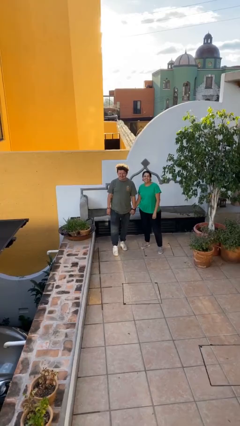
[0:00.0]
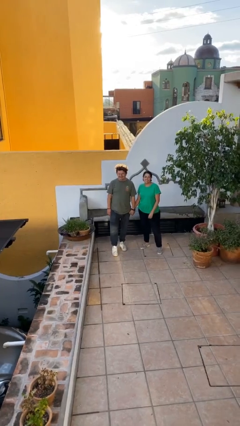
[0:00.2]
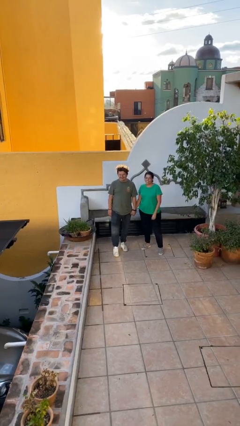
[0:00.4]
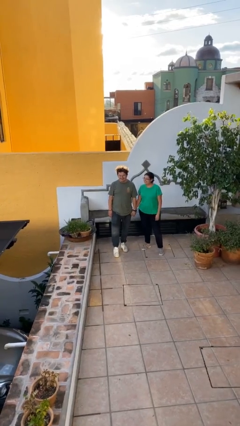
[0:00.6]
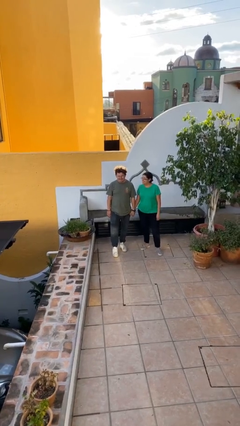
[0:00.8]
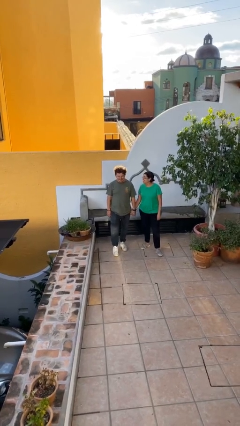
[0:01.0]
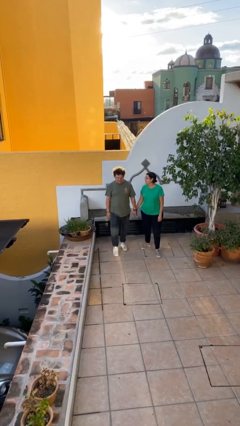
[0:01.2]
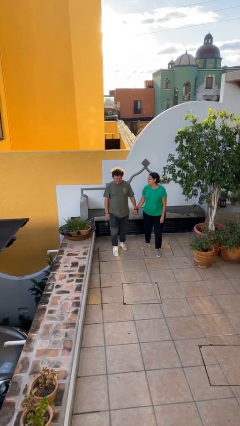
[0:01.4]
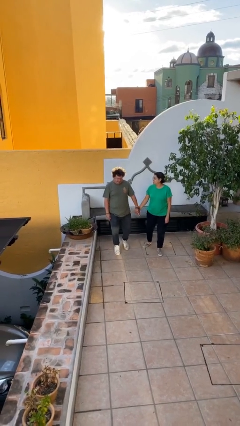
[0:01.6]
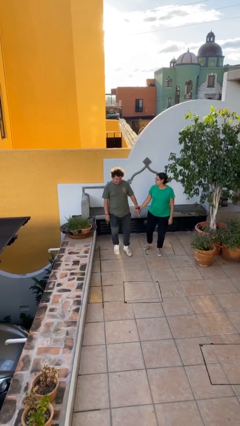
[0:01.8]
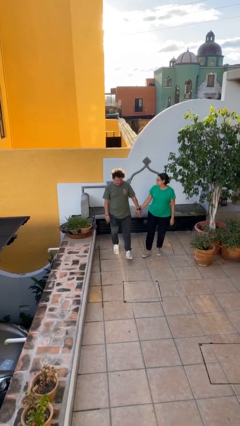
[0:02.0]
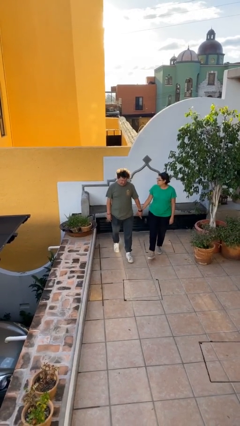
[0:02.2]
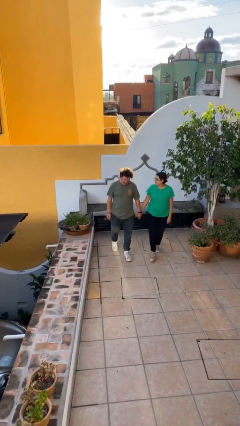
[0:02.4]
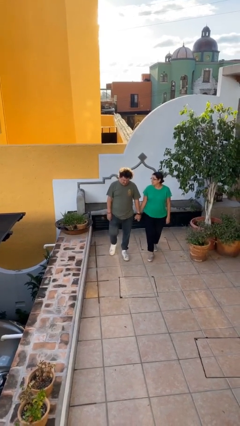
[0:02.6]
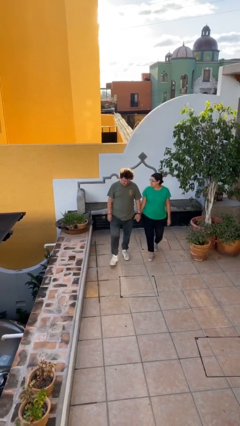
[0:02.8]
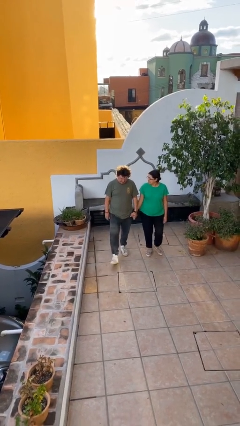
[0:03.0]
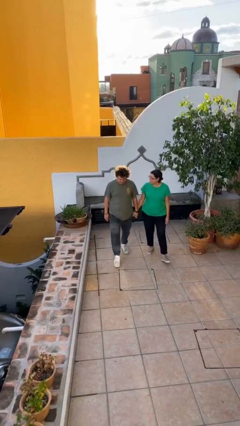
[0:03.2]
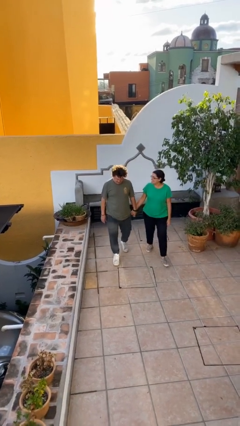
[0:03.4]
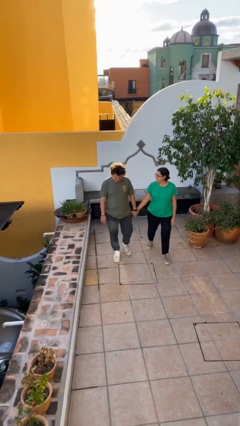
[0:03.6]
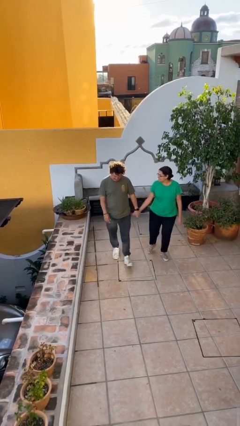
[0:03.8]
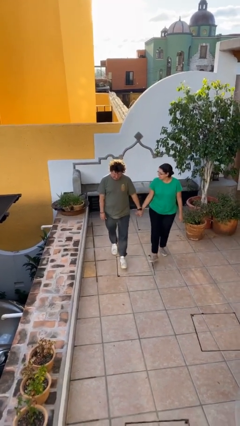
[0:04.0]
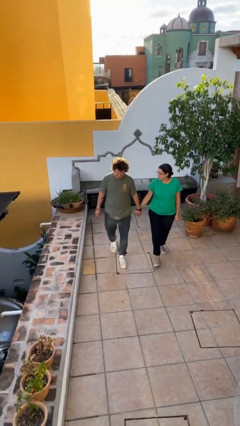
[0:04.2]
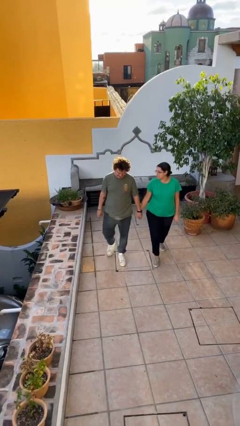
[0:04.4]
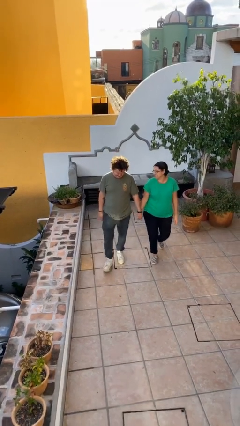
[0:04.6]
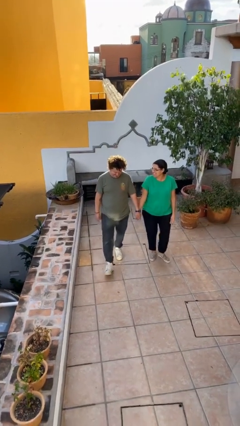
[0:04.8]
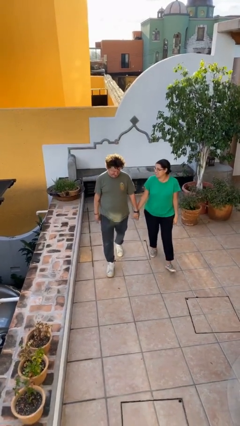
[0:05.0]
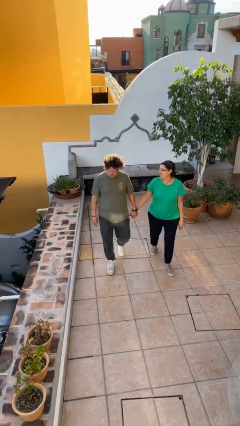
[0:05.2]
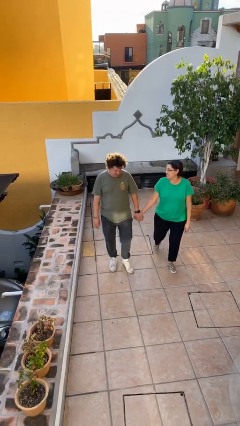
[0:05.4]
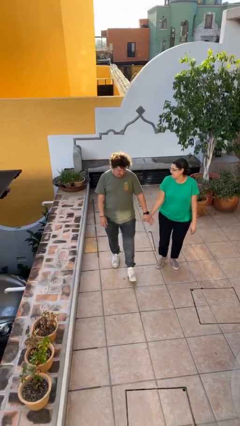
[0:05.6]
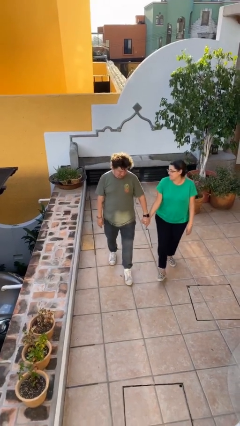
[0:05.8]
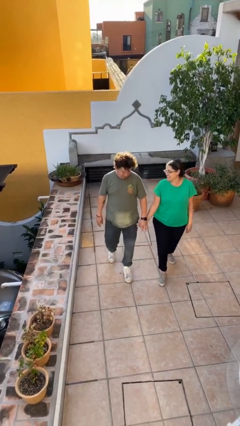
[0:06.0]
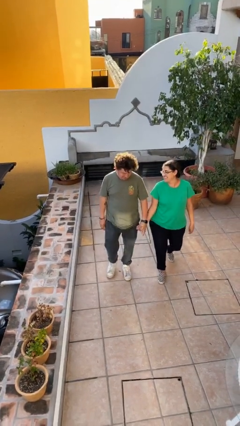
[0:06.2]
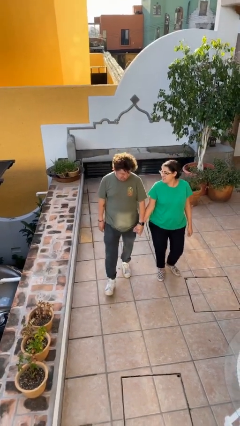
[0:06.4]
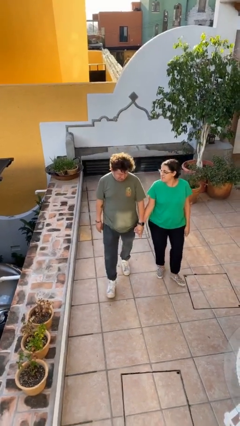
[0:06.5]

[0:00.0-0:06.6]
person holds hand

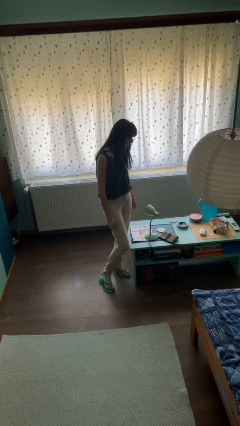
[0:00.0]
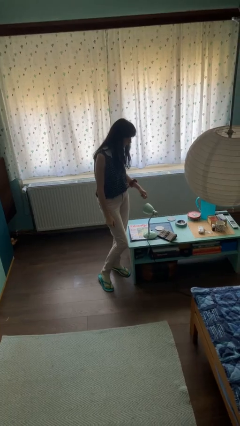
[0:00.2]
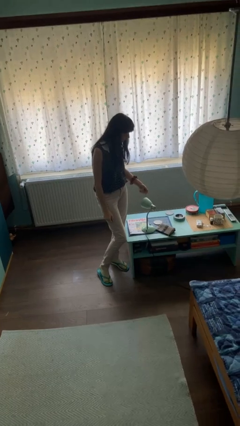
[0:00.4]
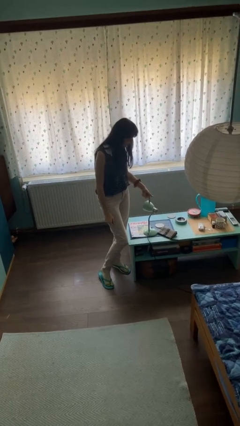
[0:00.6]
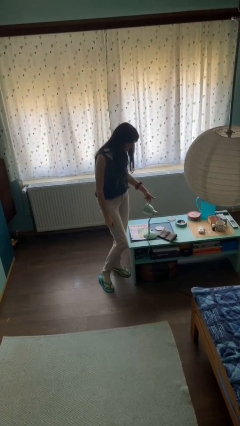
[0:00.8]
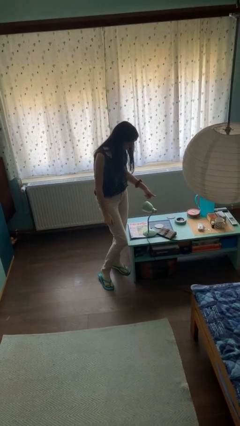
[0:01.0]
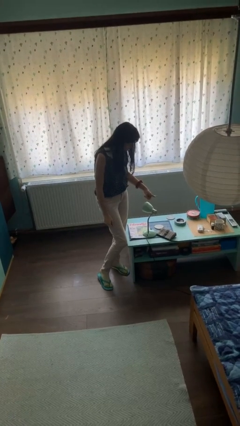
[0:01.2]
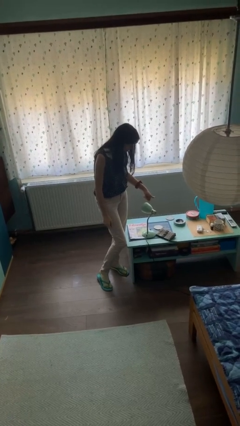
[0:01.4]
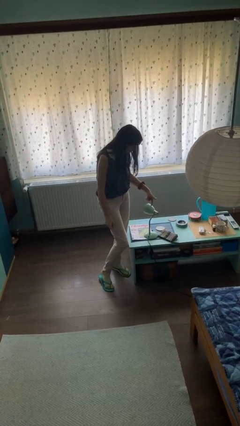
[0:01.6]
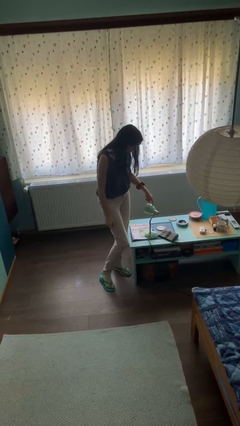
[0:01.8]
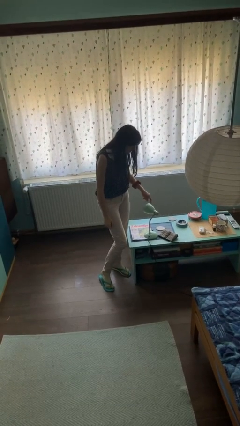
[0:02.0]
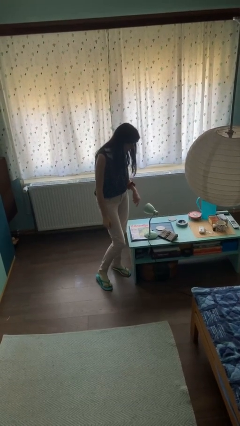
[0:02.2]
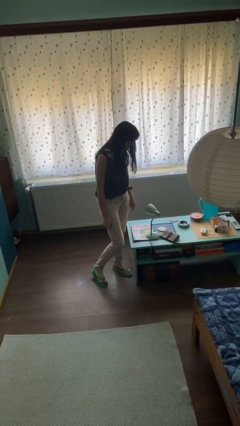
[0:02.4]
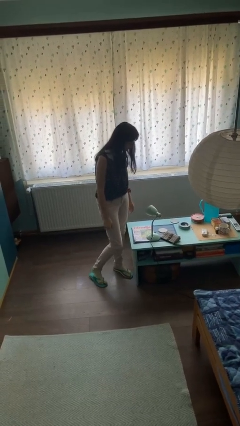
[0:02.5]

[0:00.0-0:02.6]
person taps object with finger

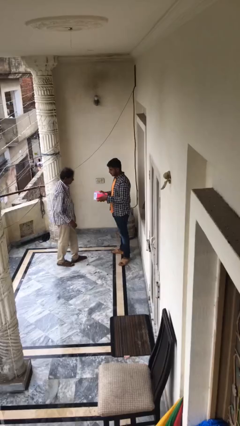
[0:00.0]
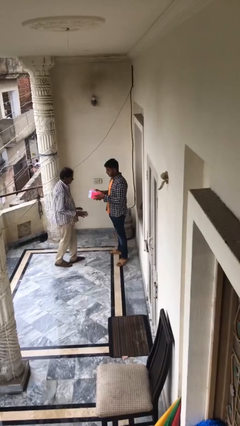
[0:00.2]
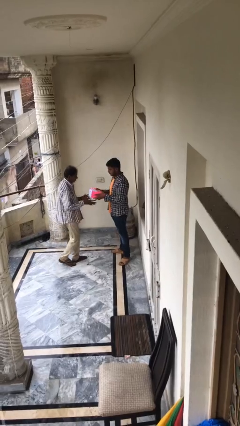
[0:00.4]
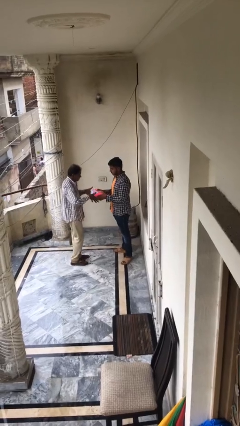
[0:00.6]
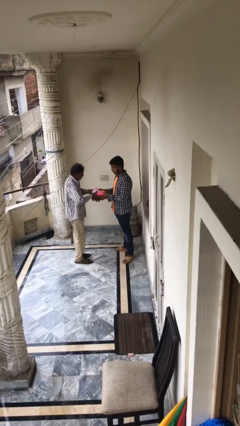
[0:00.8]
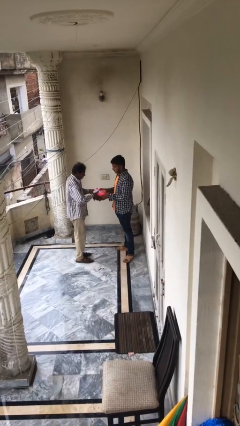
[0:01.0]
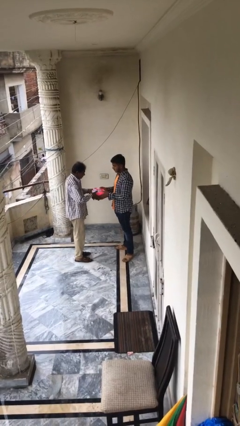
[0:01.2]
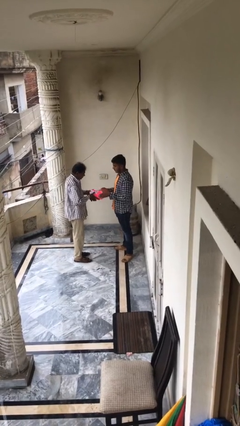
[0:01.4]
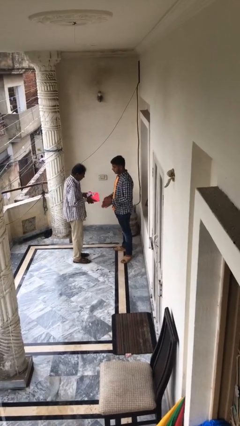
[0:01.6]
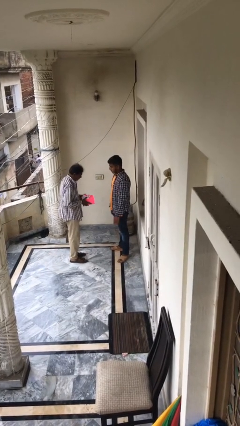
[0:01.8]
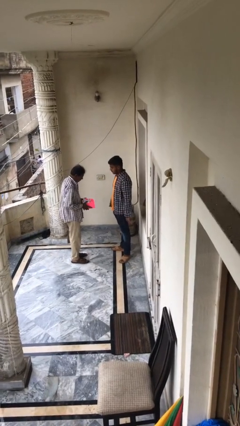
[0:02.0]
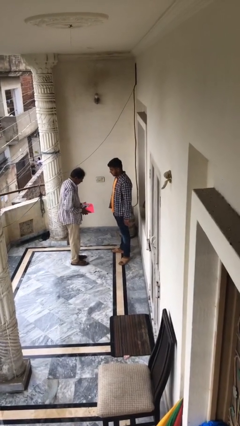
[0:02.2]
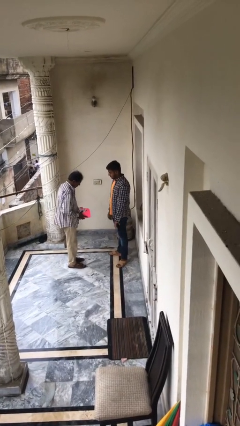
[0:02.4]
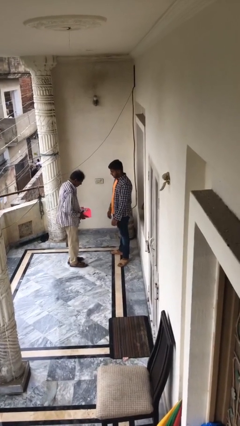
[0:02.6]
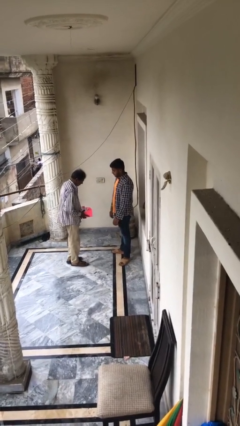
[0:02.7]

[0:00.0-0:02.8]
person transfers object to person

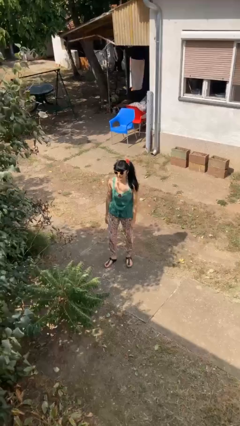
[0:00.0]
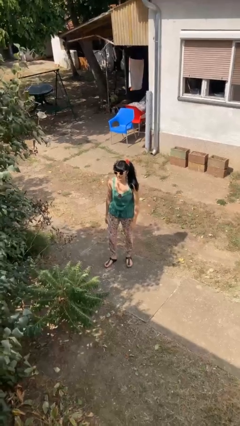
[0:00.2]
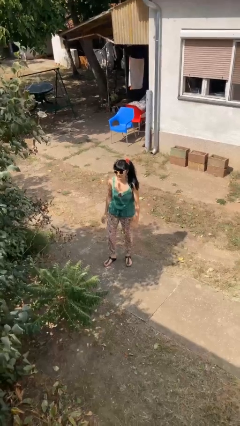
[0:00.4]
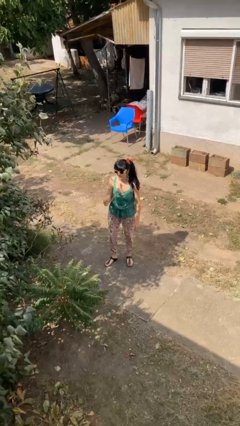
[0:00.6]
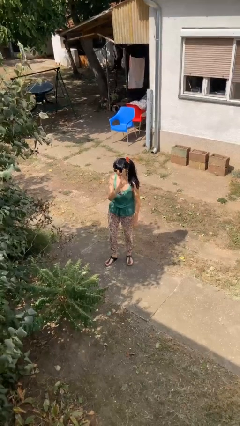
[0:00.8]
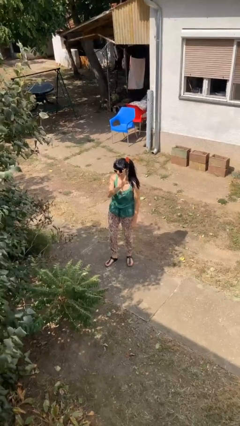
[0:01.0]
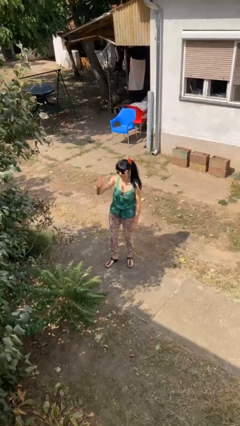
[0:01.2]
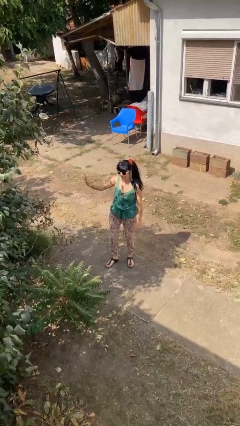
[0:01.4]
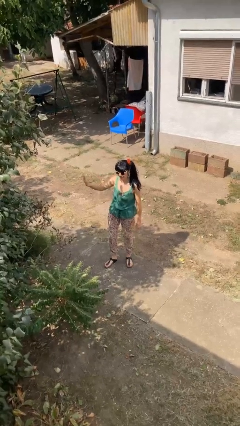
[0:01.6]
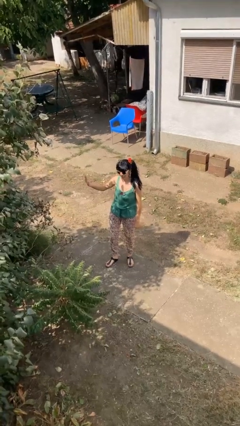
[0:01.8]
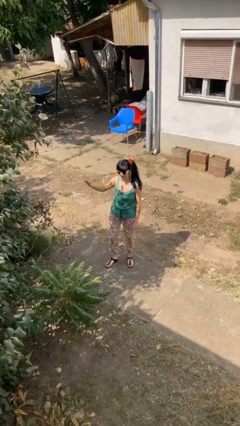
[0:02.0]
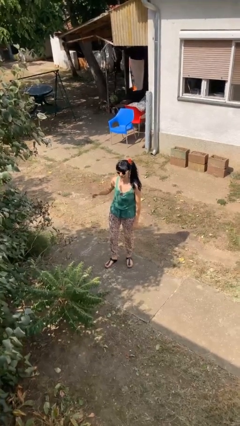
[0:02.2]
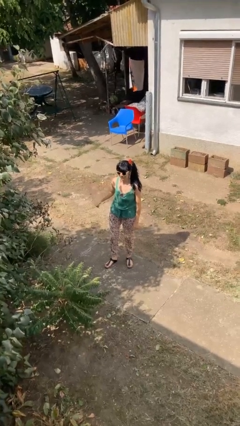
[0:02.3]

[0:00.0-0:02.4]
person gestures swipe right

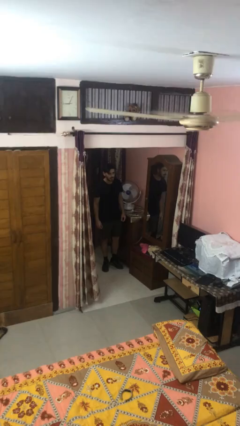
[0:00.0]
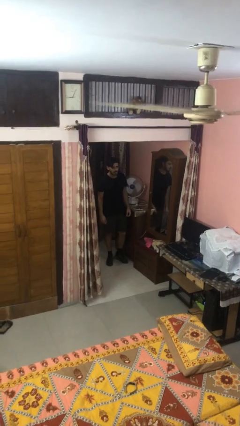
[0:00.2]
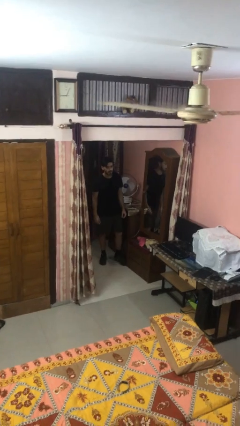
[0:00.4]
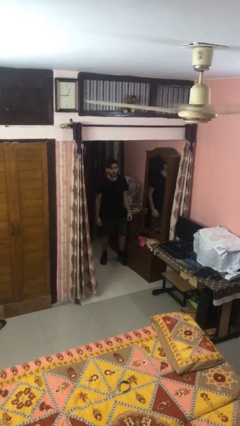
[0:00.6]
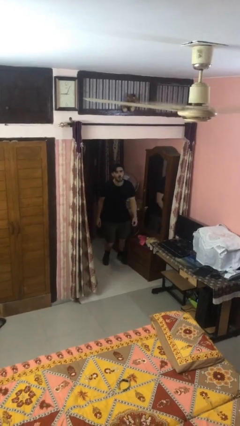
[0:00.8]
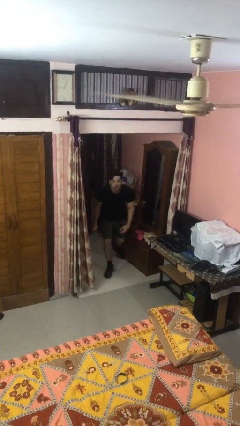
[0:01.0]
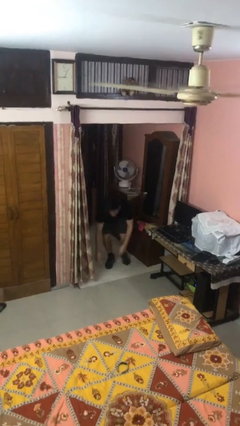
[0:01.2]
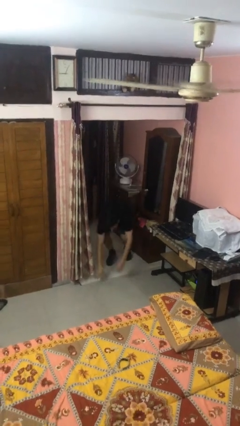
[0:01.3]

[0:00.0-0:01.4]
person trips on object on floor

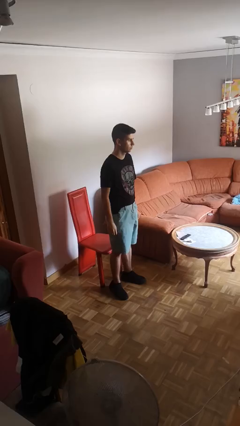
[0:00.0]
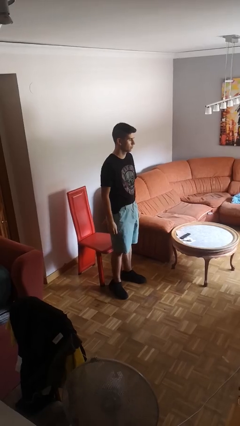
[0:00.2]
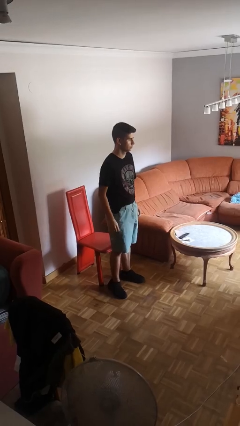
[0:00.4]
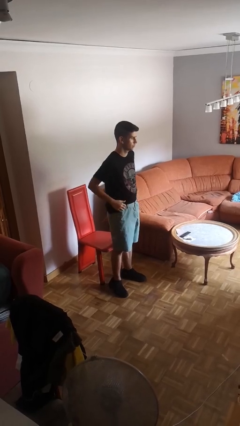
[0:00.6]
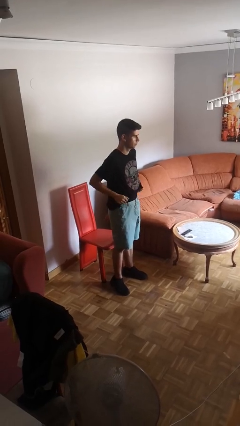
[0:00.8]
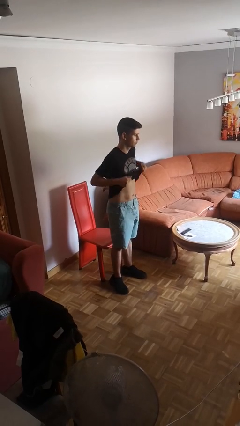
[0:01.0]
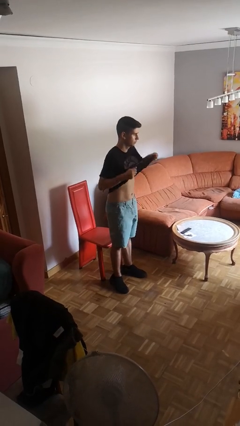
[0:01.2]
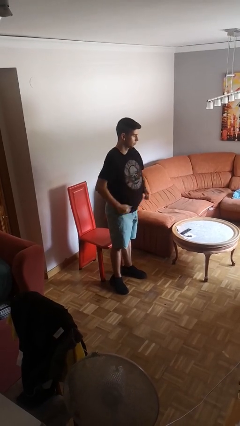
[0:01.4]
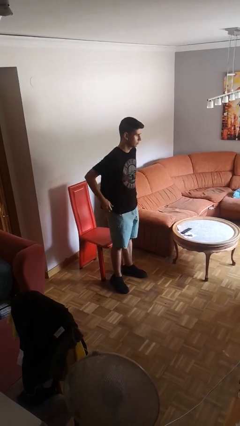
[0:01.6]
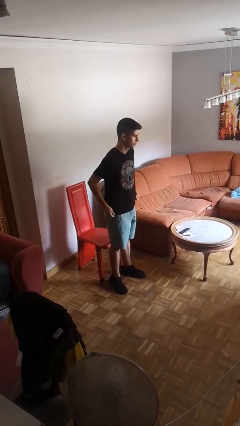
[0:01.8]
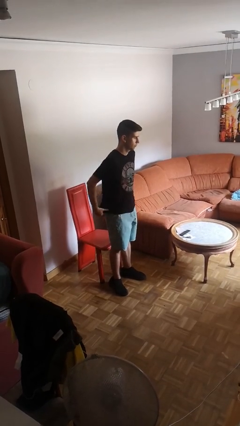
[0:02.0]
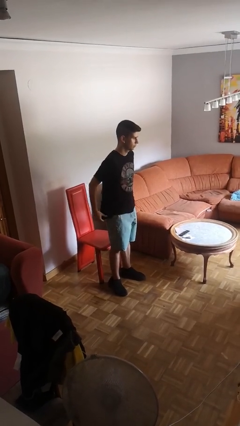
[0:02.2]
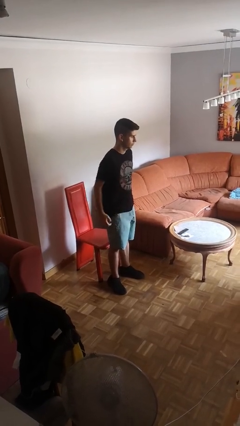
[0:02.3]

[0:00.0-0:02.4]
person untucks shirt
